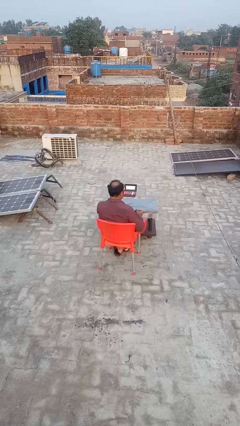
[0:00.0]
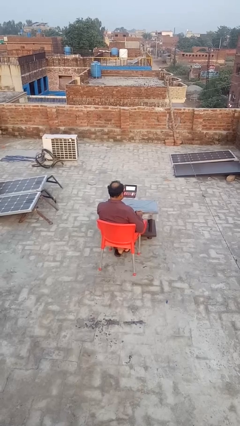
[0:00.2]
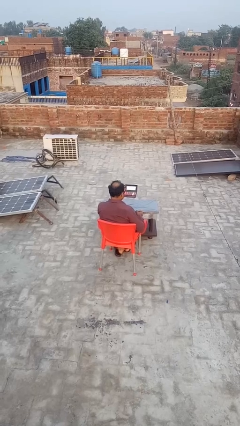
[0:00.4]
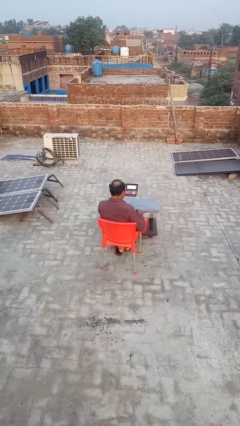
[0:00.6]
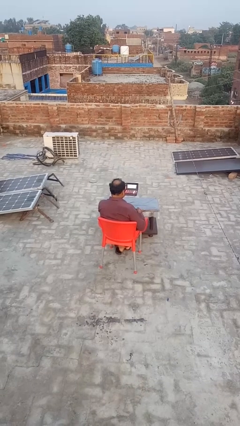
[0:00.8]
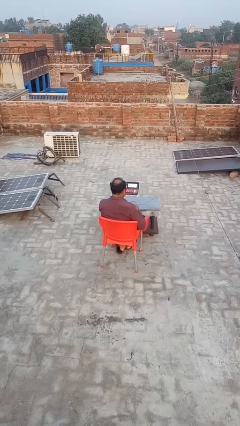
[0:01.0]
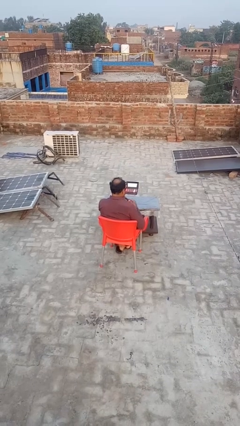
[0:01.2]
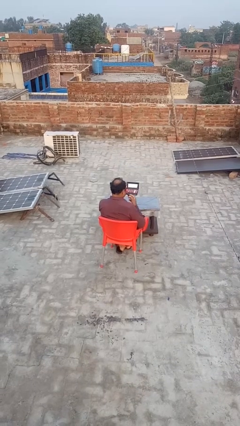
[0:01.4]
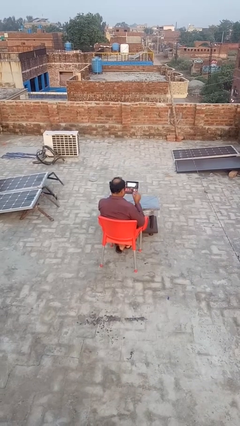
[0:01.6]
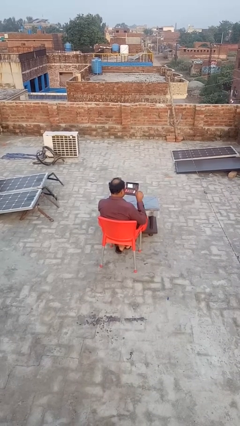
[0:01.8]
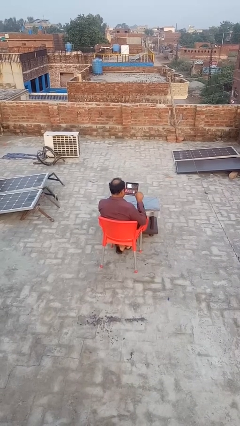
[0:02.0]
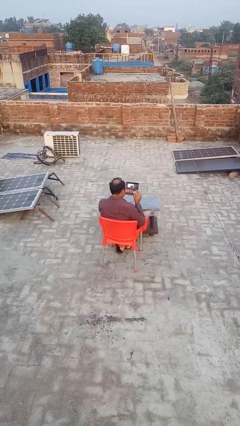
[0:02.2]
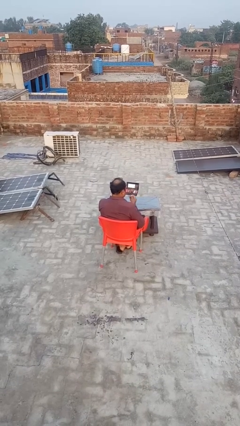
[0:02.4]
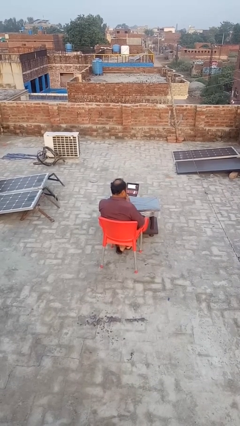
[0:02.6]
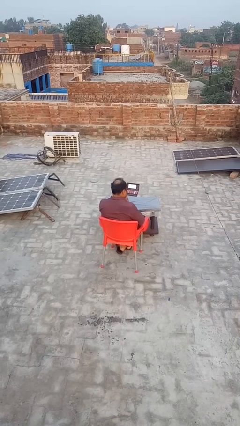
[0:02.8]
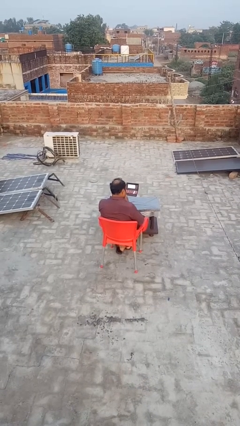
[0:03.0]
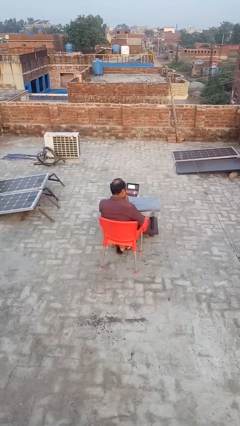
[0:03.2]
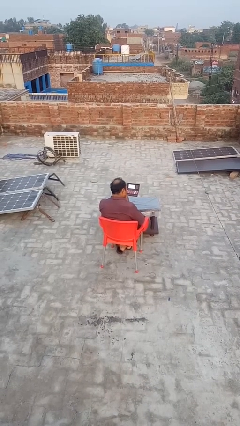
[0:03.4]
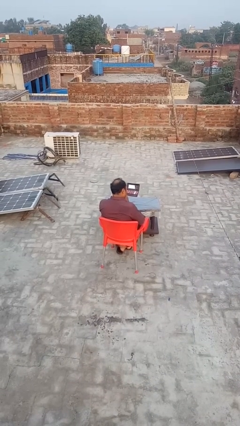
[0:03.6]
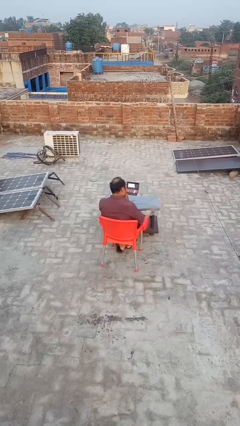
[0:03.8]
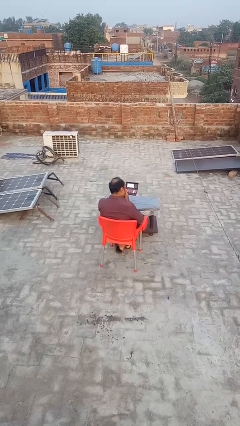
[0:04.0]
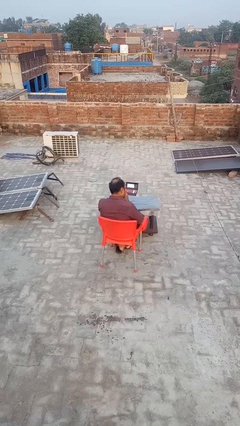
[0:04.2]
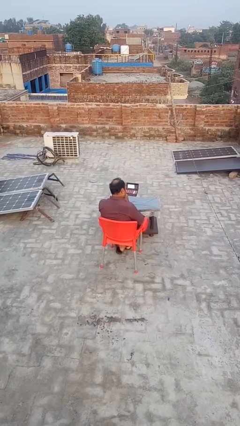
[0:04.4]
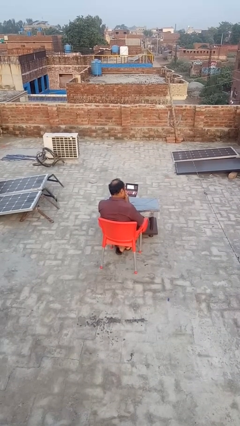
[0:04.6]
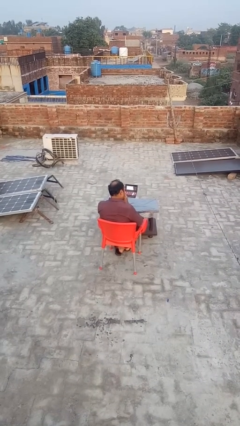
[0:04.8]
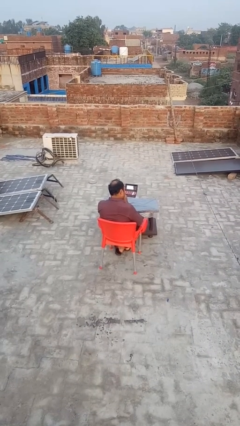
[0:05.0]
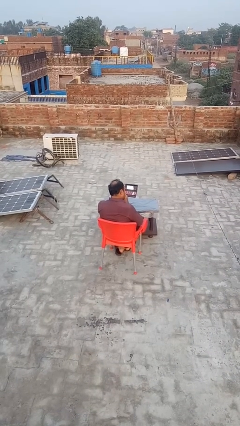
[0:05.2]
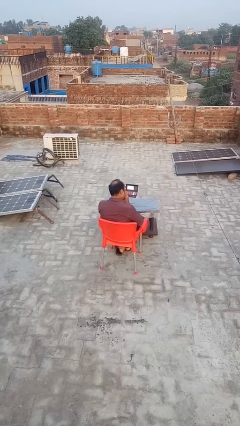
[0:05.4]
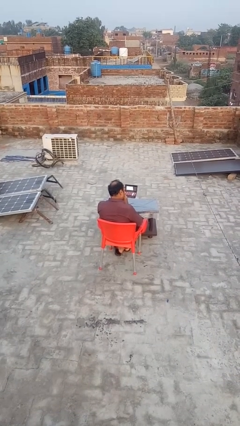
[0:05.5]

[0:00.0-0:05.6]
person applies eye makeup

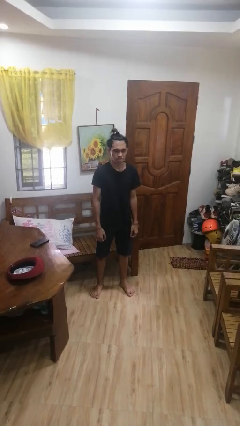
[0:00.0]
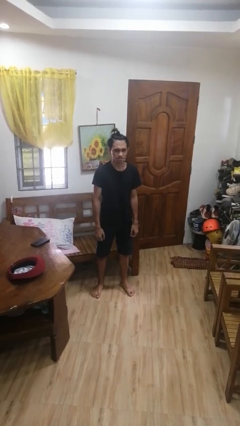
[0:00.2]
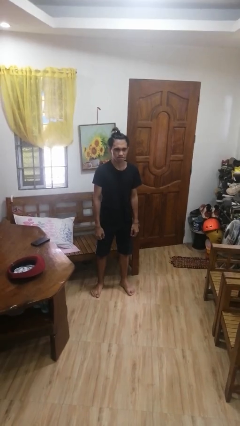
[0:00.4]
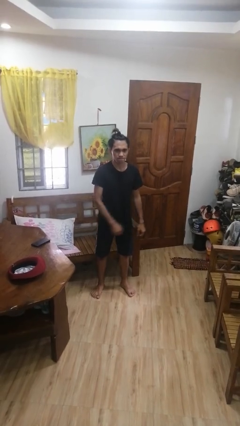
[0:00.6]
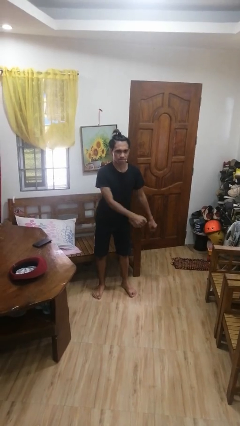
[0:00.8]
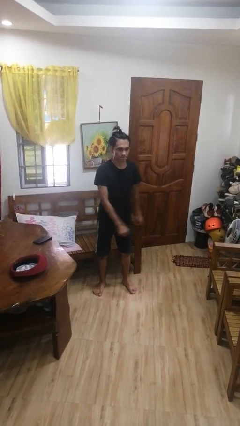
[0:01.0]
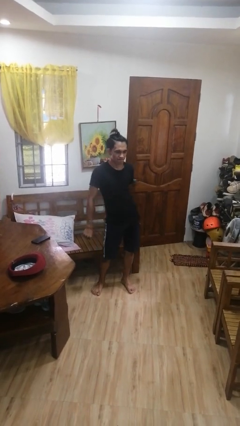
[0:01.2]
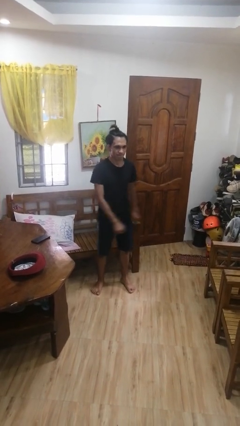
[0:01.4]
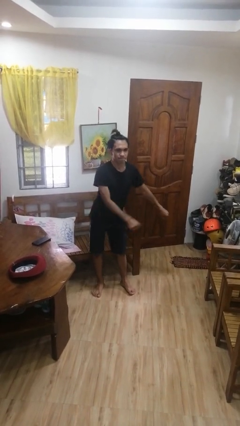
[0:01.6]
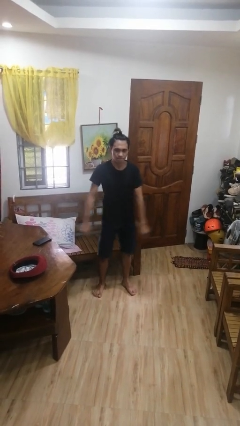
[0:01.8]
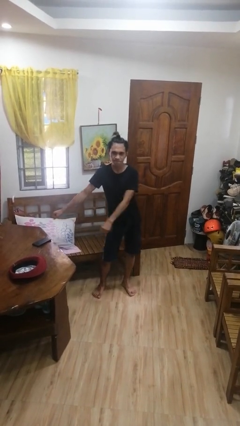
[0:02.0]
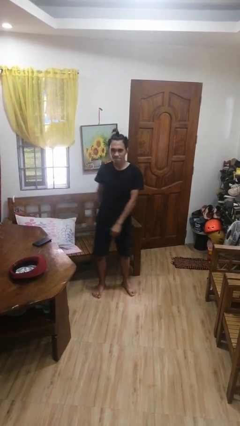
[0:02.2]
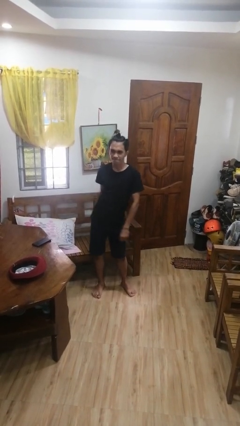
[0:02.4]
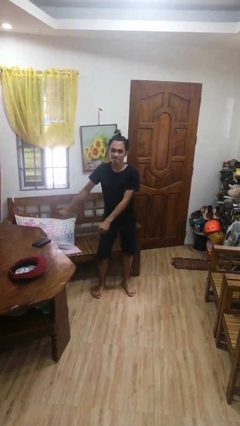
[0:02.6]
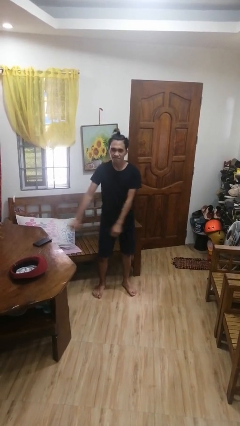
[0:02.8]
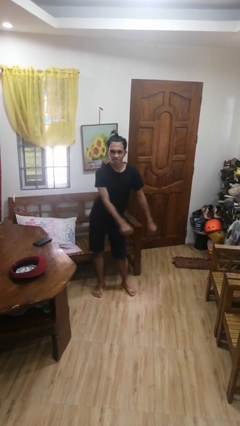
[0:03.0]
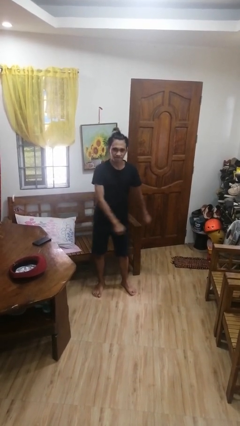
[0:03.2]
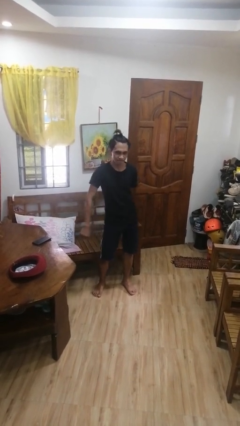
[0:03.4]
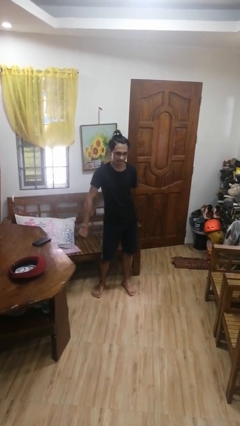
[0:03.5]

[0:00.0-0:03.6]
person dances in place

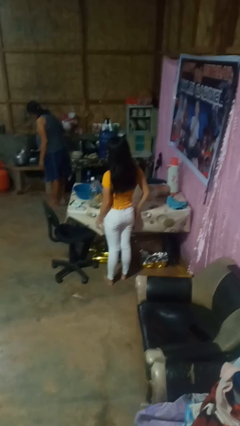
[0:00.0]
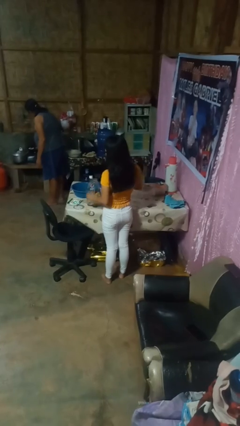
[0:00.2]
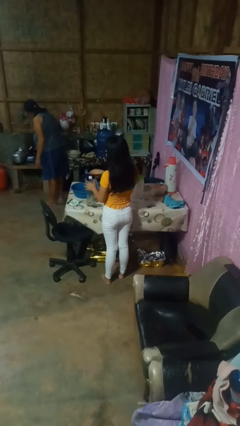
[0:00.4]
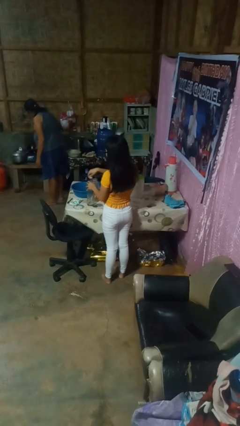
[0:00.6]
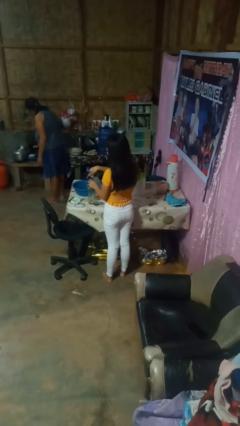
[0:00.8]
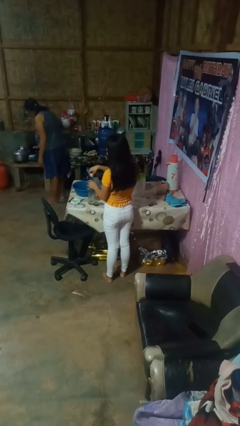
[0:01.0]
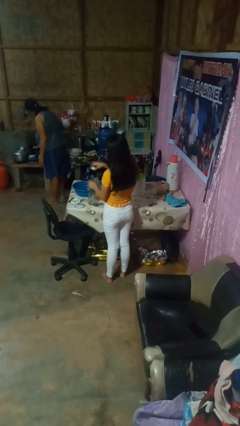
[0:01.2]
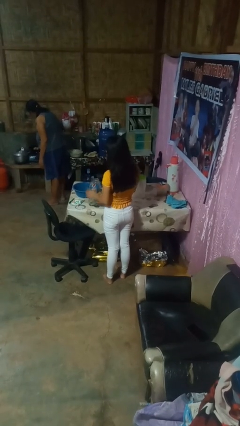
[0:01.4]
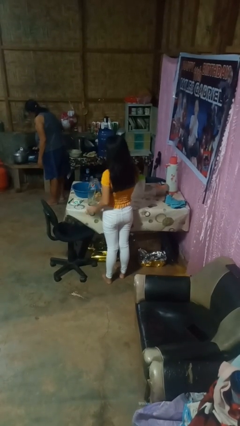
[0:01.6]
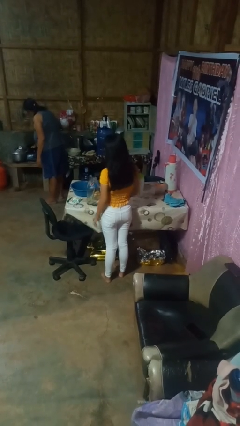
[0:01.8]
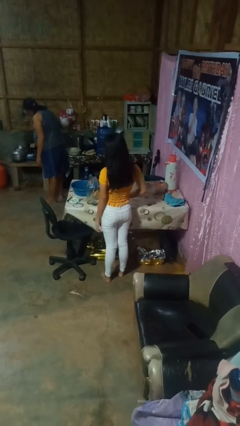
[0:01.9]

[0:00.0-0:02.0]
person unscrews lid from bottle

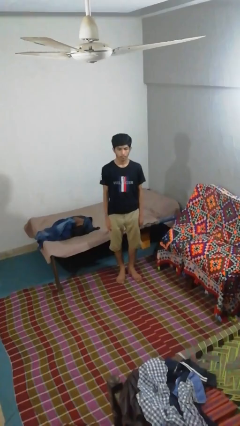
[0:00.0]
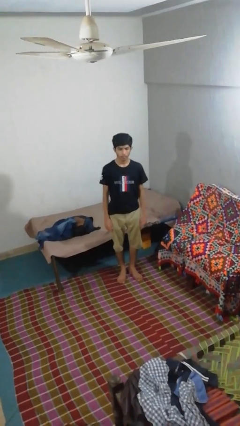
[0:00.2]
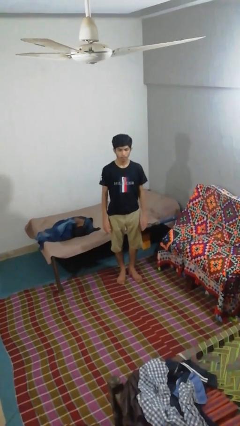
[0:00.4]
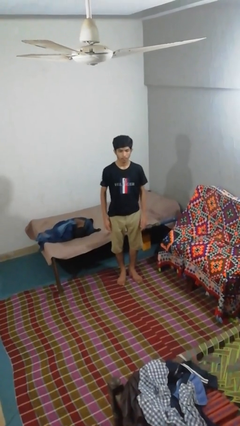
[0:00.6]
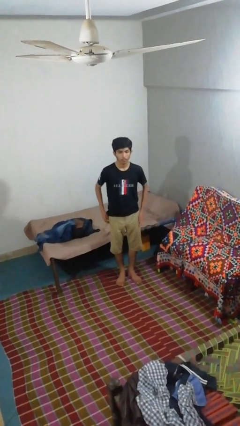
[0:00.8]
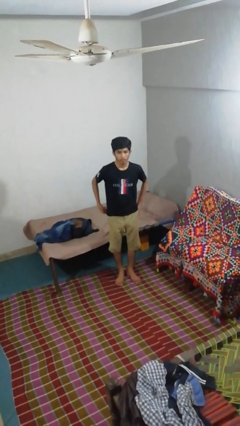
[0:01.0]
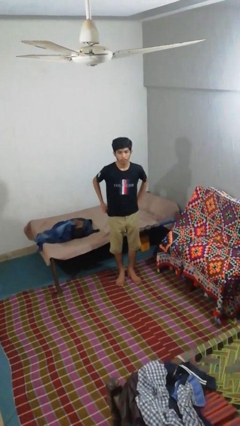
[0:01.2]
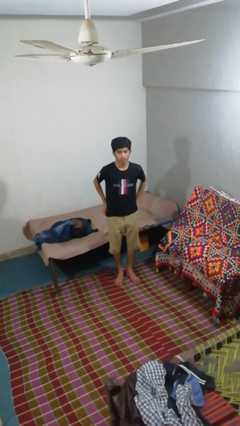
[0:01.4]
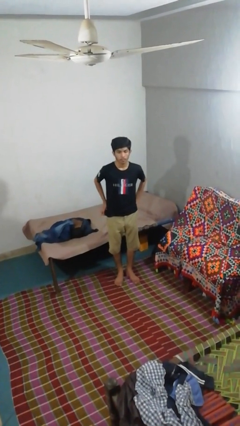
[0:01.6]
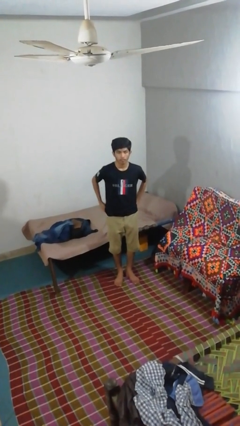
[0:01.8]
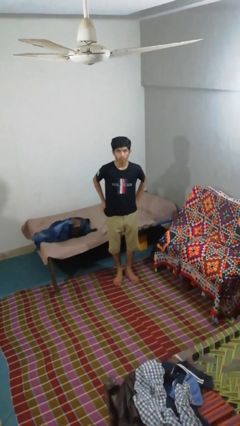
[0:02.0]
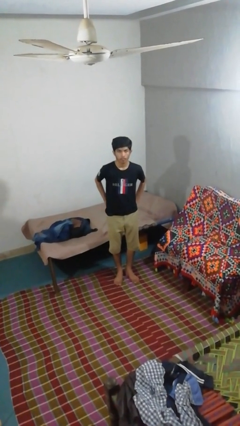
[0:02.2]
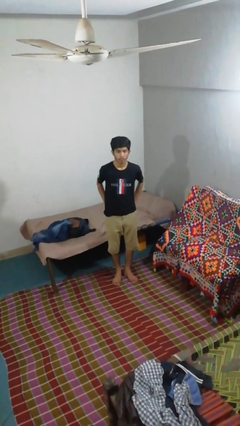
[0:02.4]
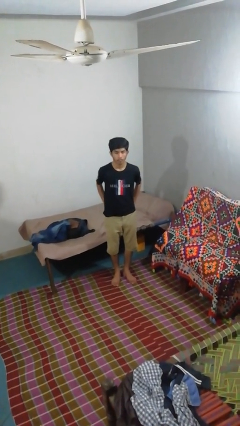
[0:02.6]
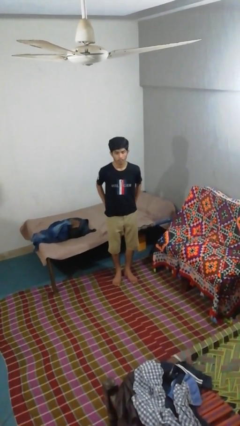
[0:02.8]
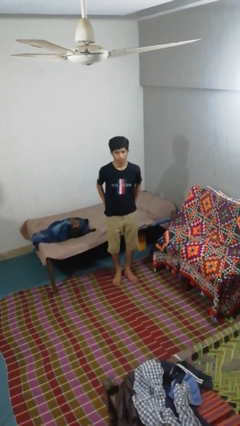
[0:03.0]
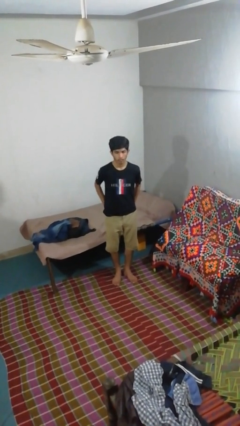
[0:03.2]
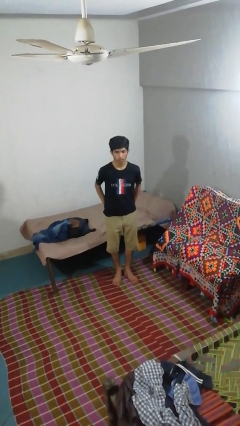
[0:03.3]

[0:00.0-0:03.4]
person puts hands in back pockets

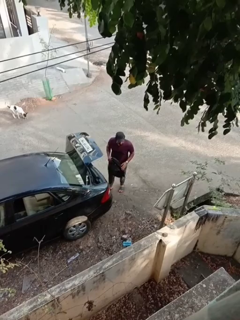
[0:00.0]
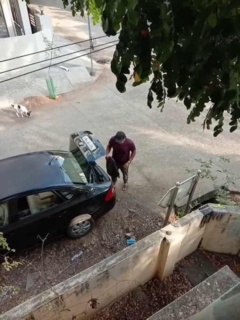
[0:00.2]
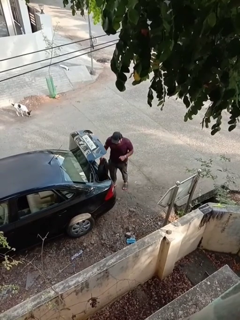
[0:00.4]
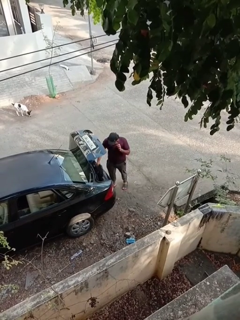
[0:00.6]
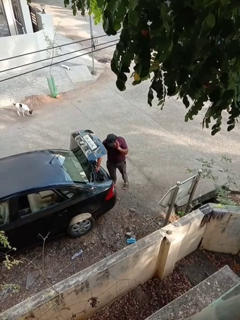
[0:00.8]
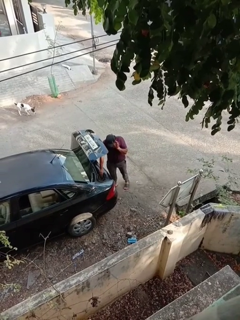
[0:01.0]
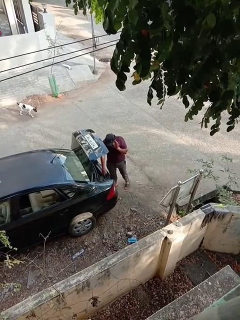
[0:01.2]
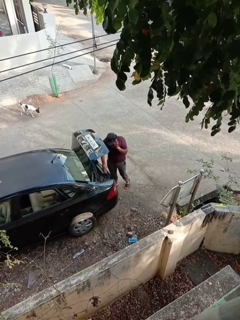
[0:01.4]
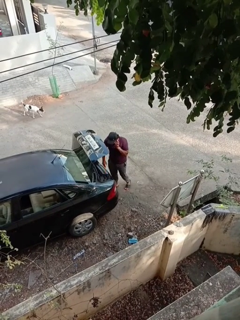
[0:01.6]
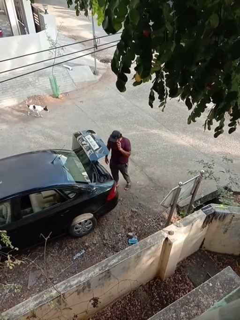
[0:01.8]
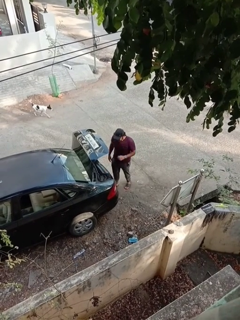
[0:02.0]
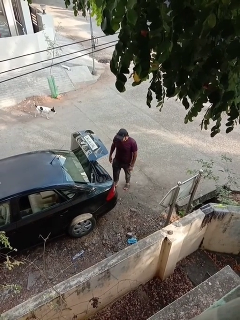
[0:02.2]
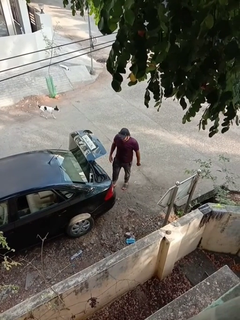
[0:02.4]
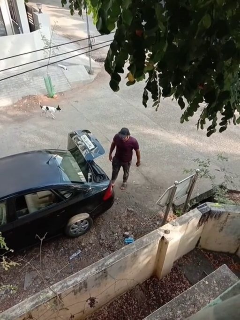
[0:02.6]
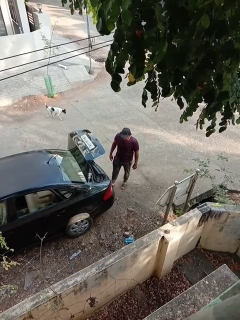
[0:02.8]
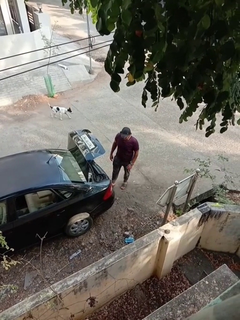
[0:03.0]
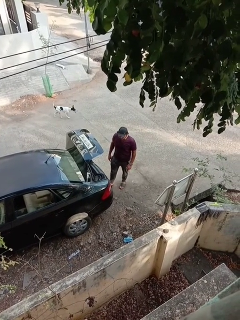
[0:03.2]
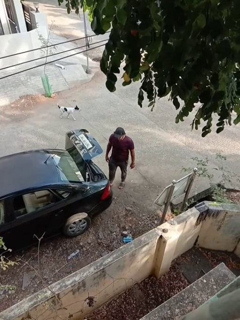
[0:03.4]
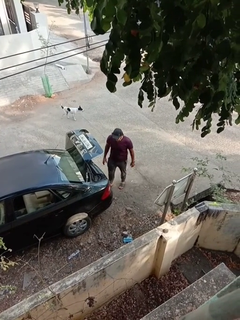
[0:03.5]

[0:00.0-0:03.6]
person loads car

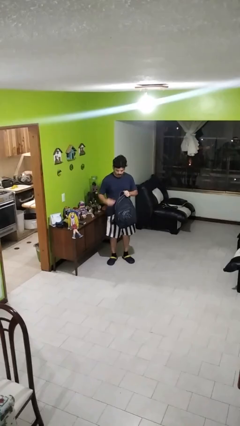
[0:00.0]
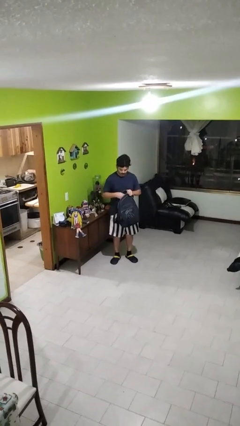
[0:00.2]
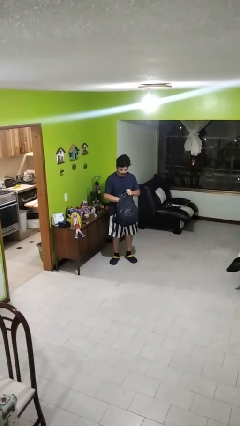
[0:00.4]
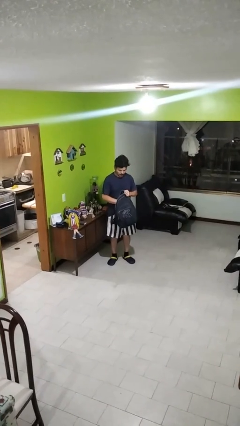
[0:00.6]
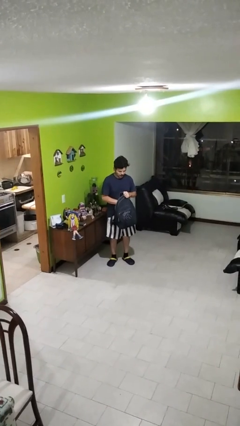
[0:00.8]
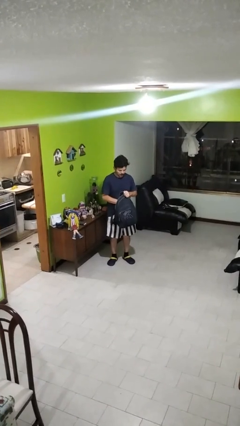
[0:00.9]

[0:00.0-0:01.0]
person searches in backpack
